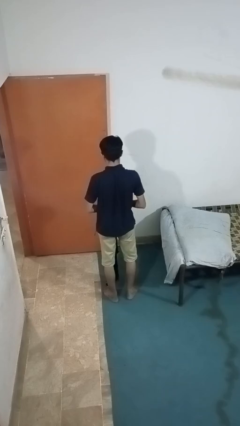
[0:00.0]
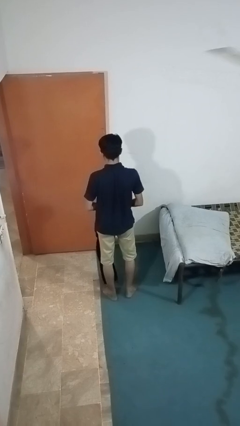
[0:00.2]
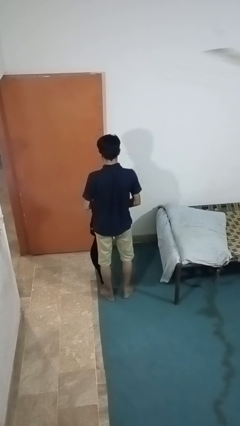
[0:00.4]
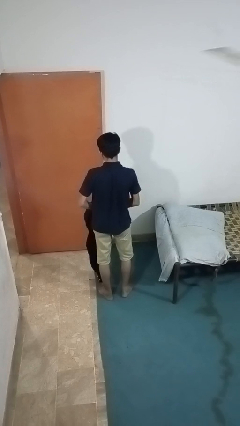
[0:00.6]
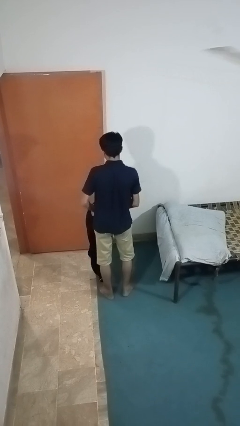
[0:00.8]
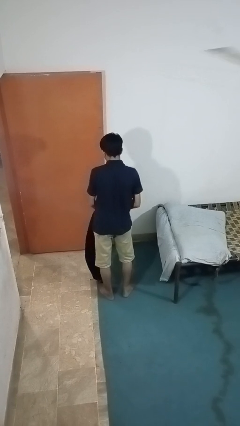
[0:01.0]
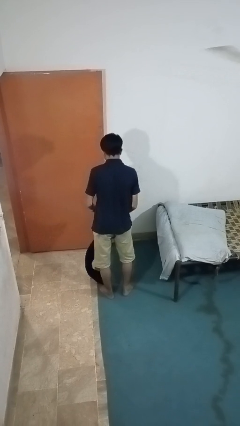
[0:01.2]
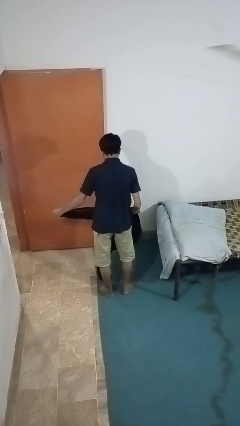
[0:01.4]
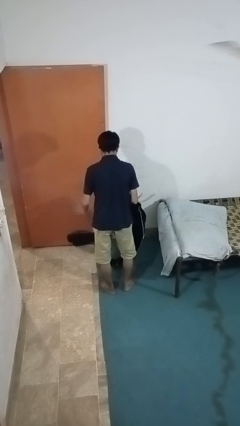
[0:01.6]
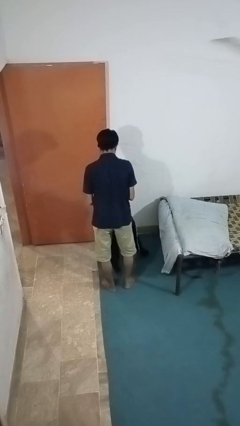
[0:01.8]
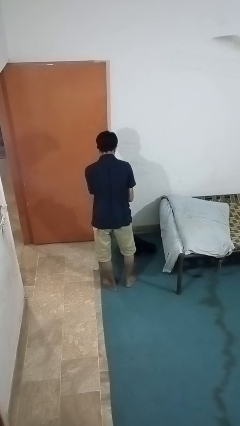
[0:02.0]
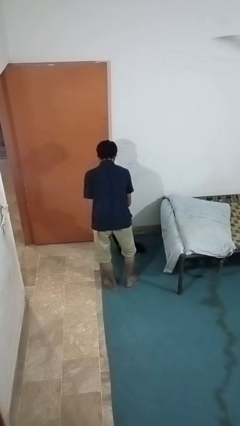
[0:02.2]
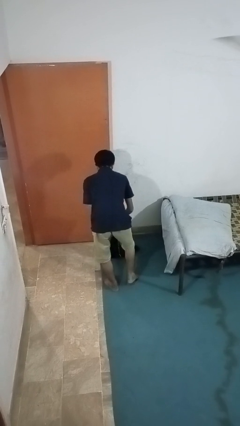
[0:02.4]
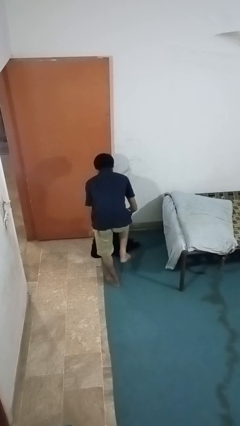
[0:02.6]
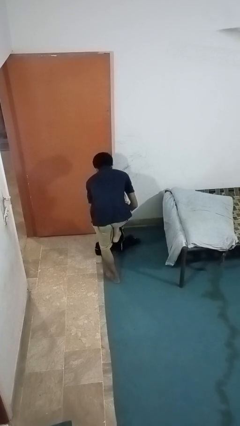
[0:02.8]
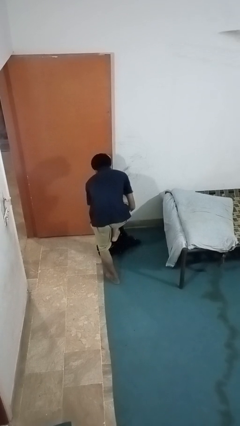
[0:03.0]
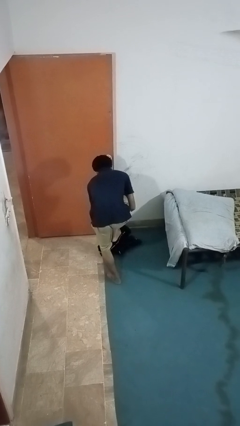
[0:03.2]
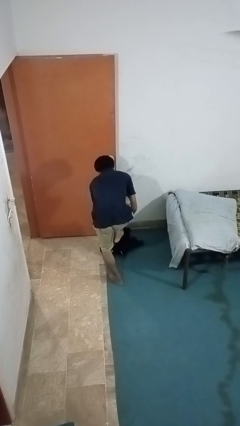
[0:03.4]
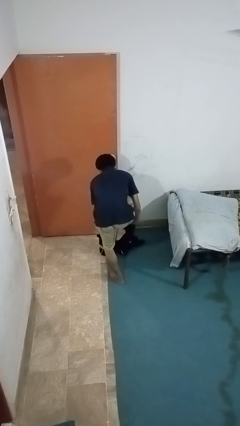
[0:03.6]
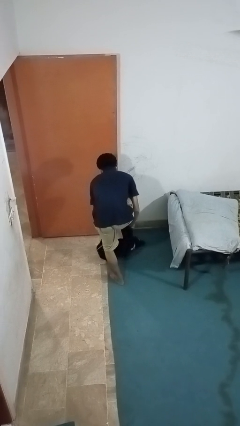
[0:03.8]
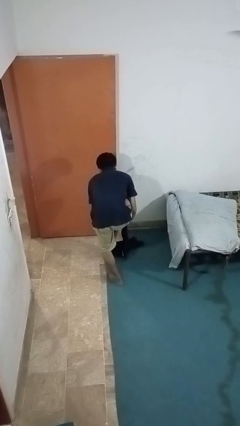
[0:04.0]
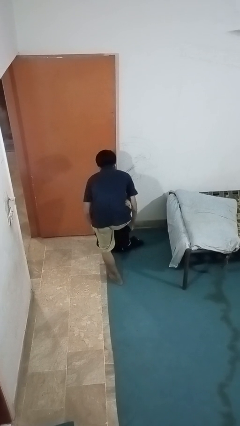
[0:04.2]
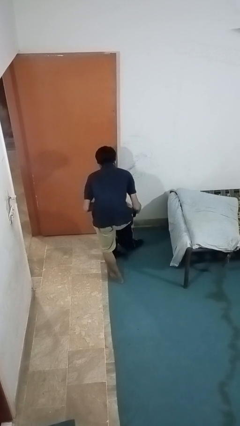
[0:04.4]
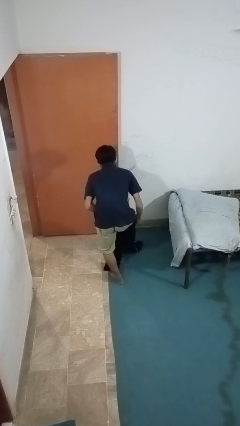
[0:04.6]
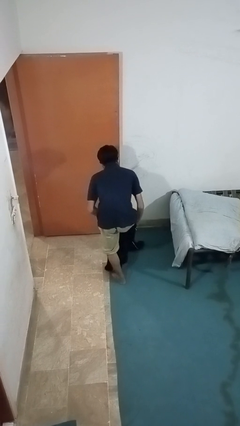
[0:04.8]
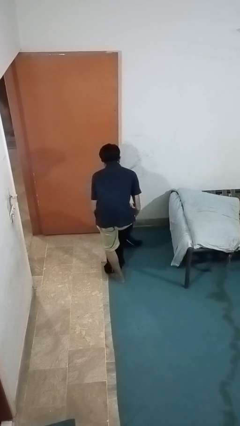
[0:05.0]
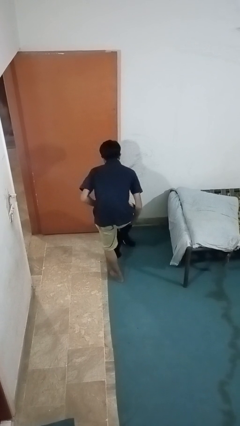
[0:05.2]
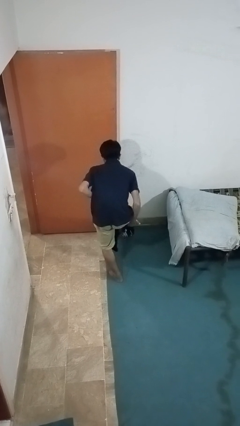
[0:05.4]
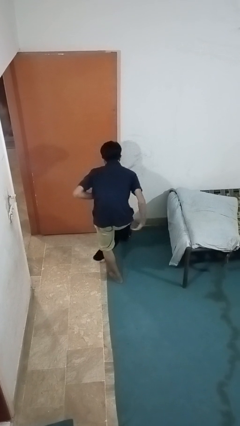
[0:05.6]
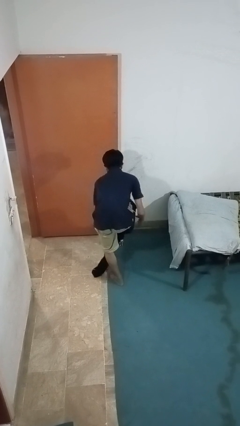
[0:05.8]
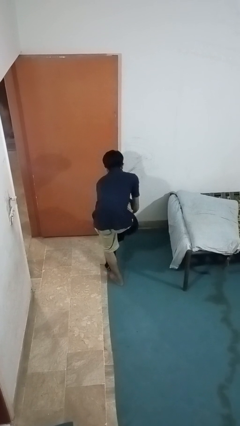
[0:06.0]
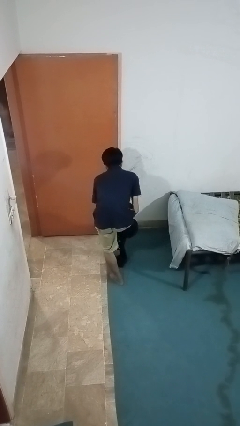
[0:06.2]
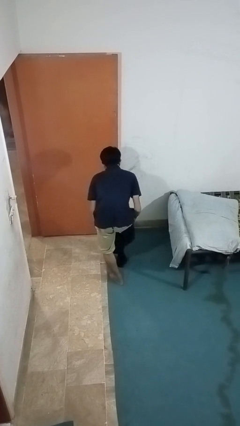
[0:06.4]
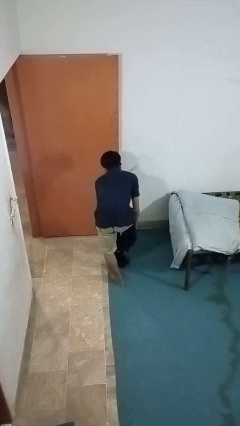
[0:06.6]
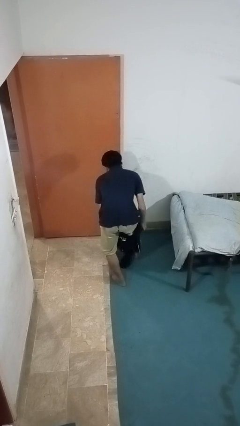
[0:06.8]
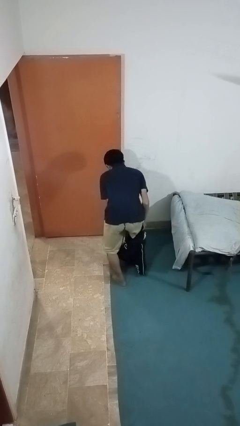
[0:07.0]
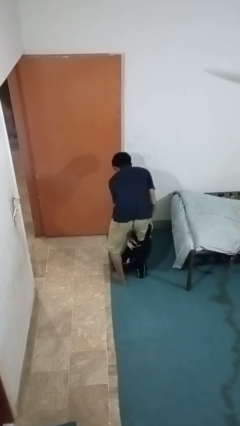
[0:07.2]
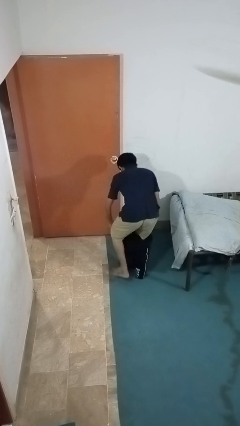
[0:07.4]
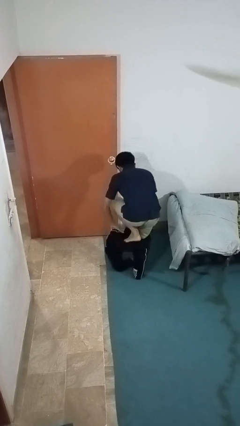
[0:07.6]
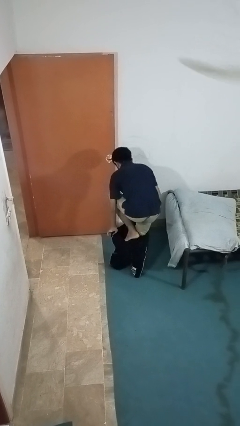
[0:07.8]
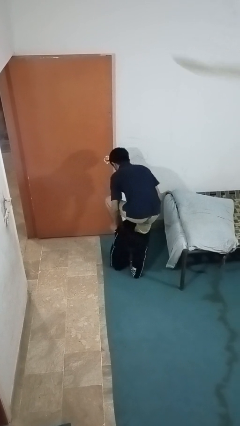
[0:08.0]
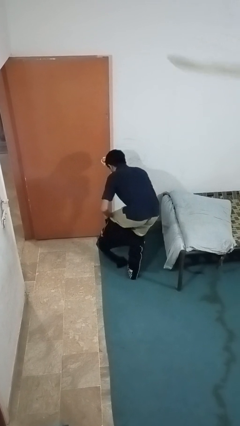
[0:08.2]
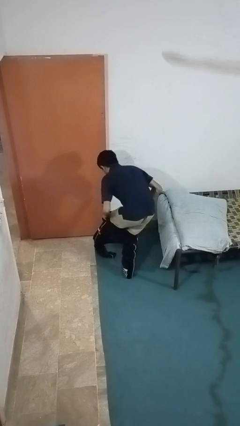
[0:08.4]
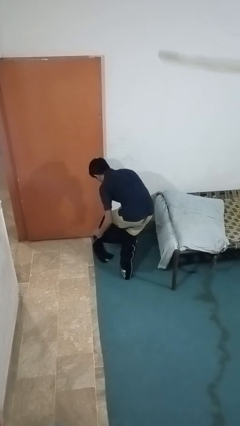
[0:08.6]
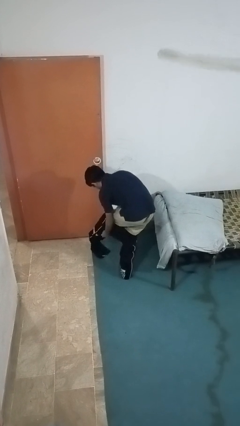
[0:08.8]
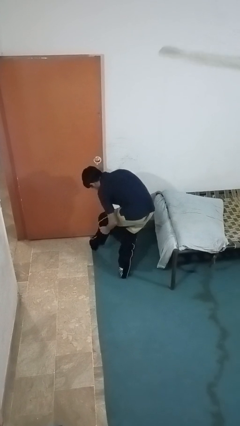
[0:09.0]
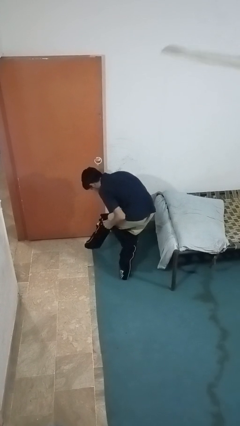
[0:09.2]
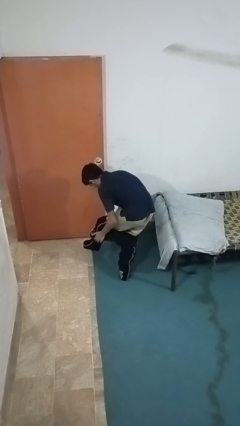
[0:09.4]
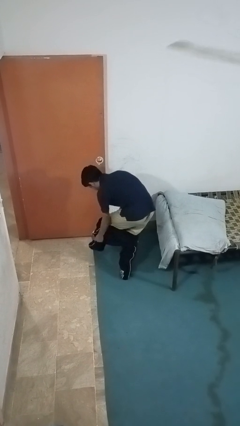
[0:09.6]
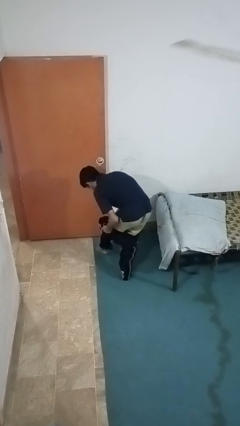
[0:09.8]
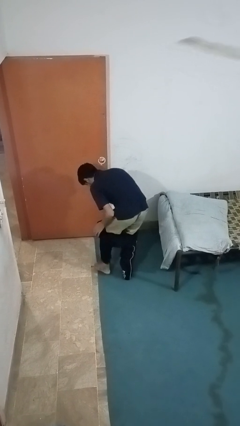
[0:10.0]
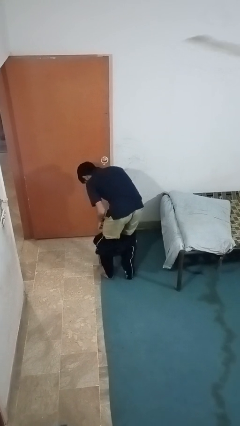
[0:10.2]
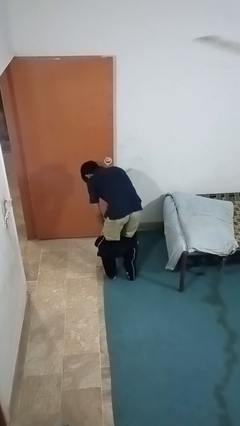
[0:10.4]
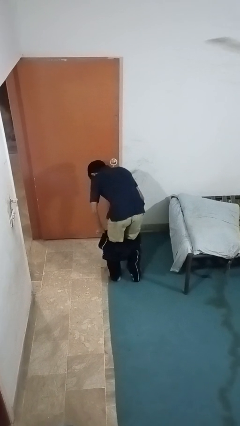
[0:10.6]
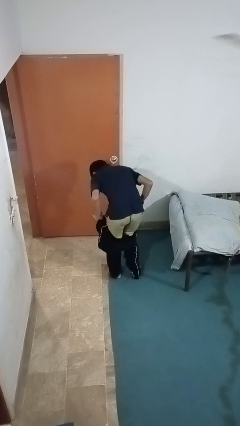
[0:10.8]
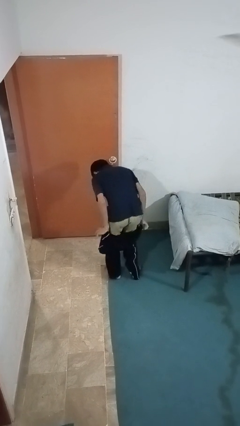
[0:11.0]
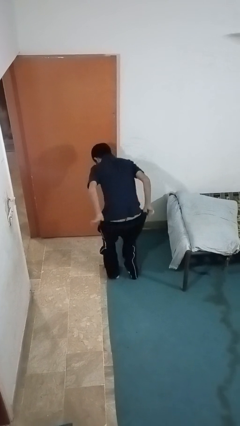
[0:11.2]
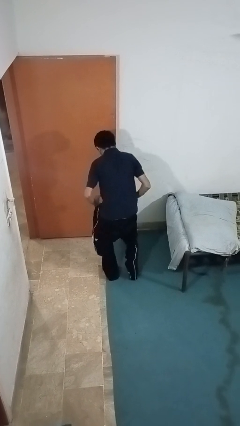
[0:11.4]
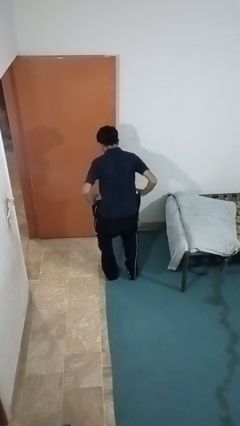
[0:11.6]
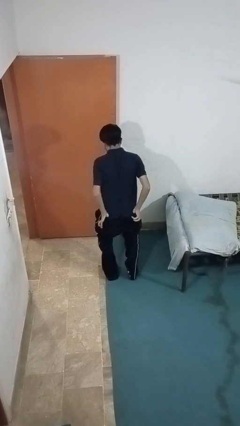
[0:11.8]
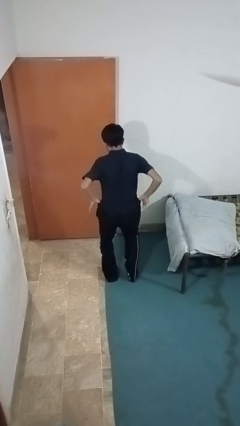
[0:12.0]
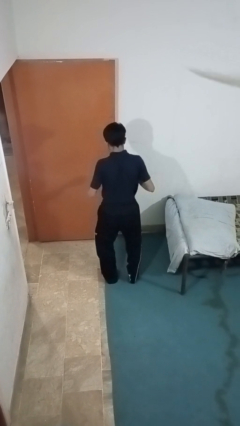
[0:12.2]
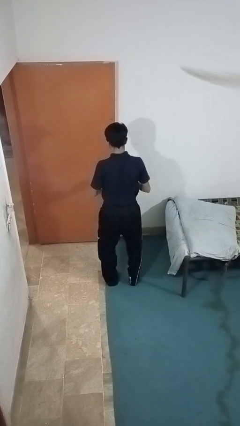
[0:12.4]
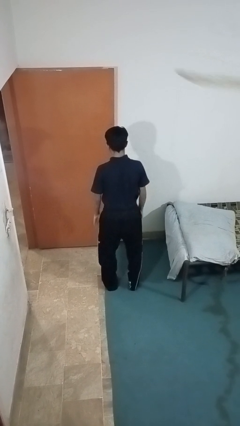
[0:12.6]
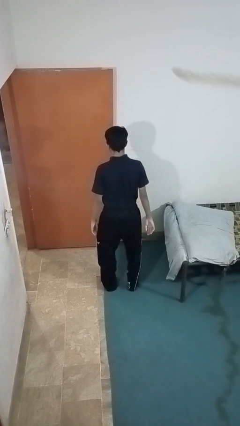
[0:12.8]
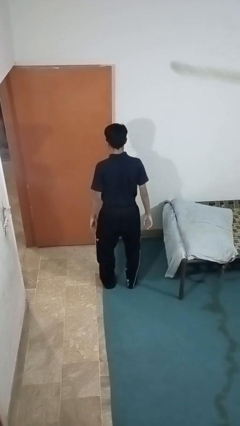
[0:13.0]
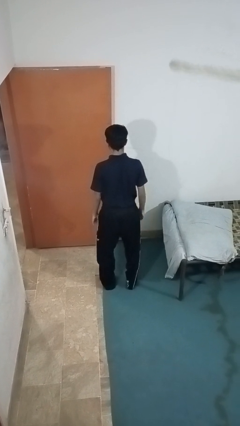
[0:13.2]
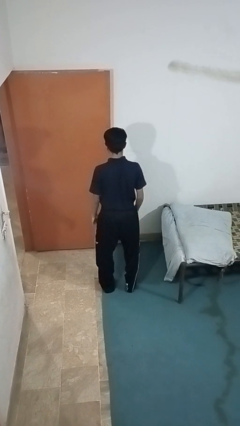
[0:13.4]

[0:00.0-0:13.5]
person puts on pants

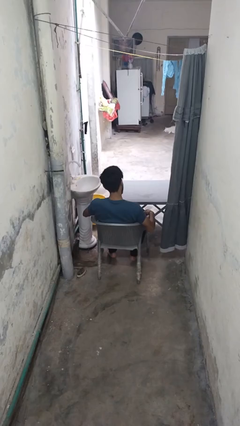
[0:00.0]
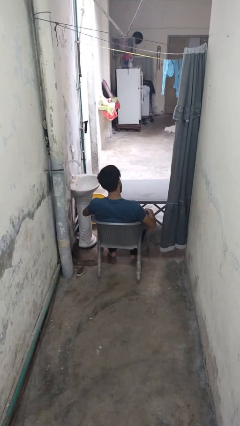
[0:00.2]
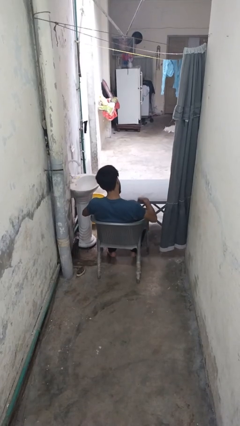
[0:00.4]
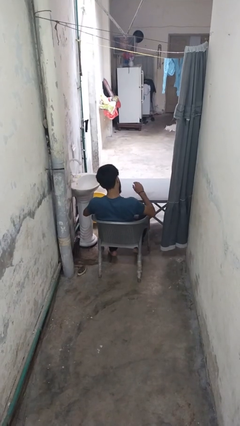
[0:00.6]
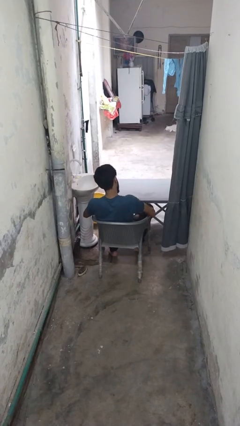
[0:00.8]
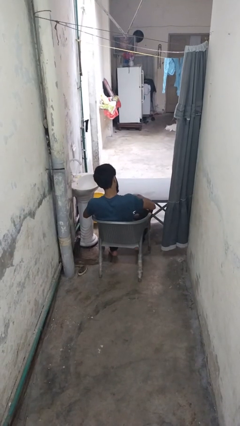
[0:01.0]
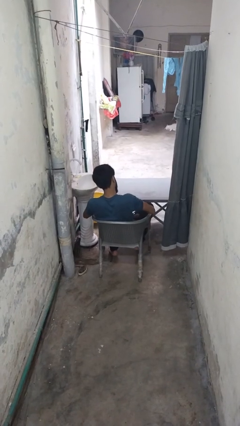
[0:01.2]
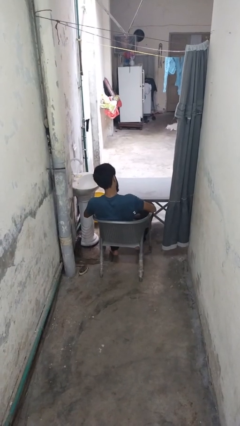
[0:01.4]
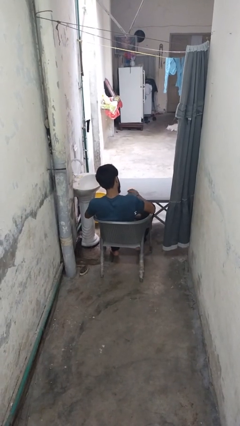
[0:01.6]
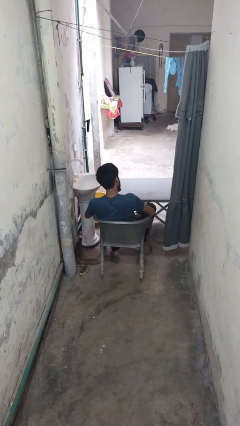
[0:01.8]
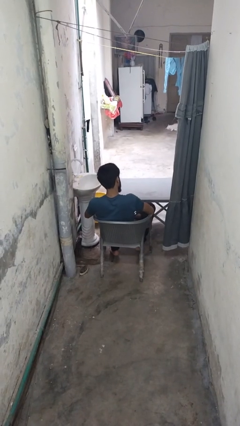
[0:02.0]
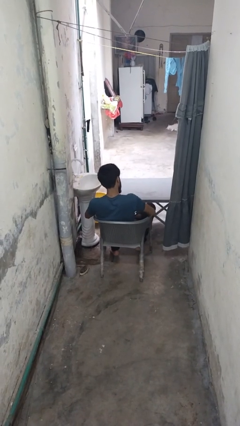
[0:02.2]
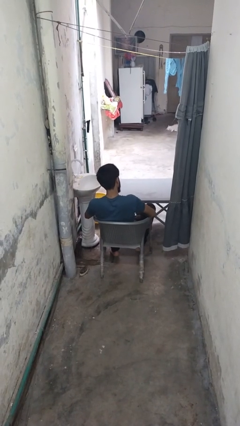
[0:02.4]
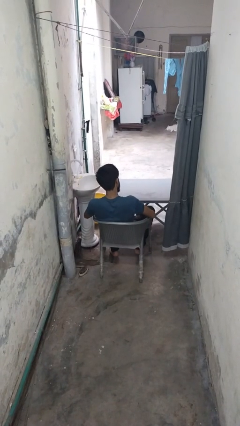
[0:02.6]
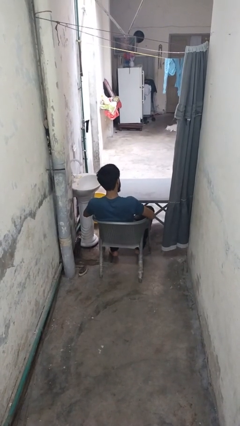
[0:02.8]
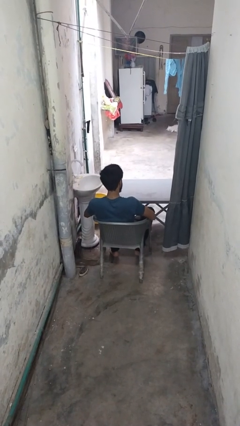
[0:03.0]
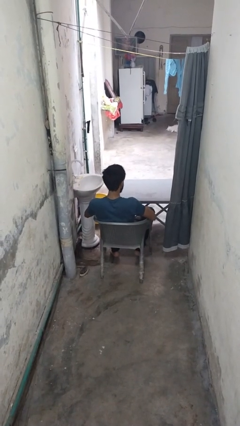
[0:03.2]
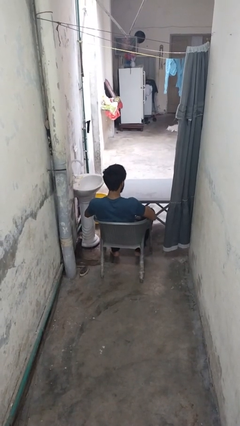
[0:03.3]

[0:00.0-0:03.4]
person slaps hands on thighs

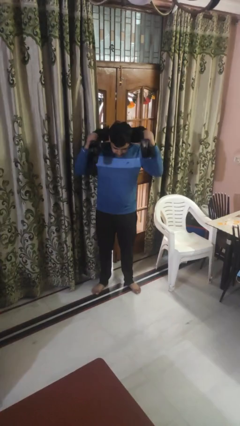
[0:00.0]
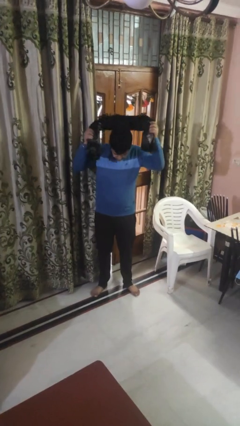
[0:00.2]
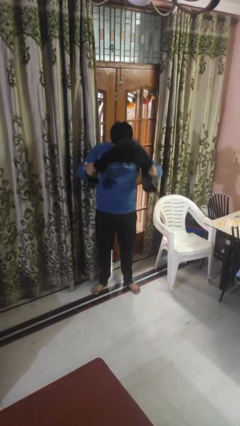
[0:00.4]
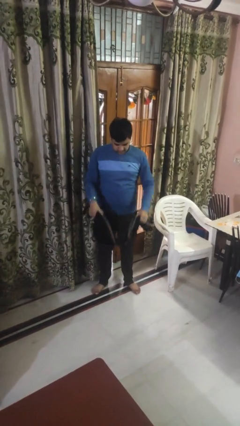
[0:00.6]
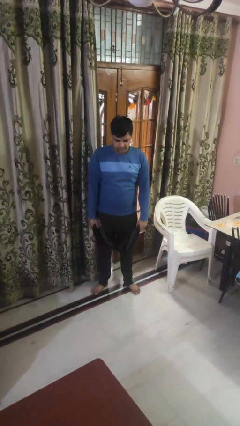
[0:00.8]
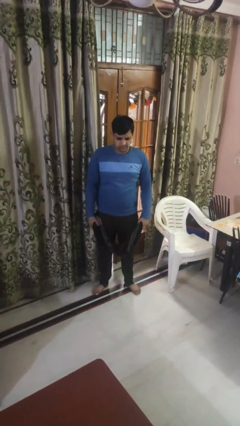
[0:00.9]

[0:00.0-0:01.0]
person takes off scarf

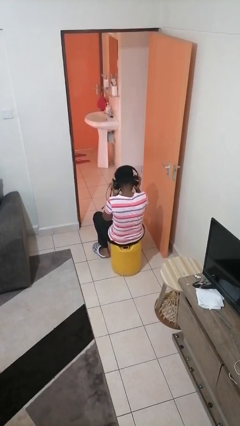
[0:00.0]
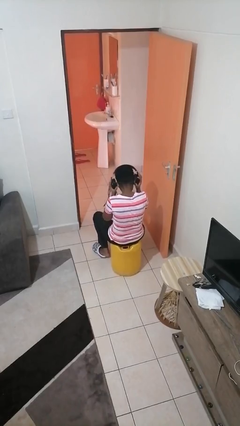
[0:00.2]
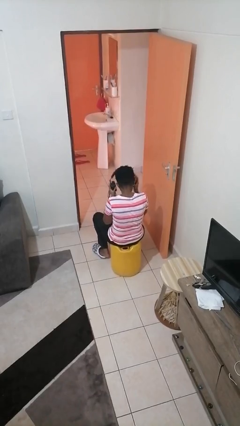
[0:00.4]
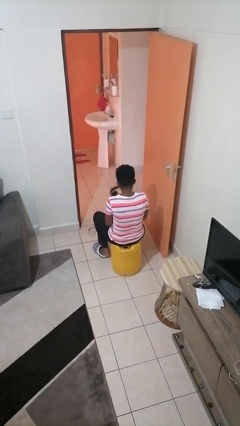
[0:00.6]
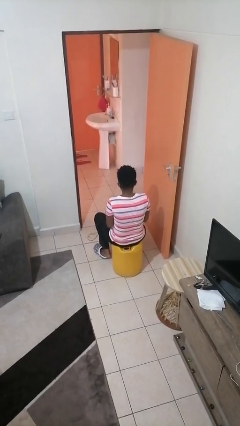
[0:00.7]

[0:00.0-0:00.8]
person puts on headphones
